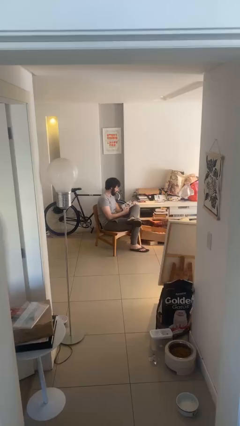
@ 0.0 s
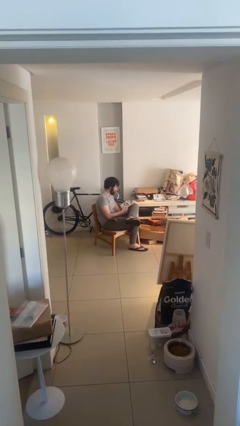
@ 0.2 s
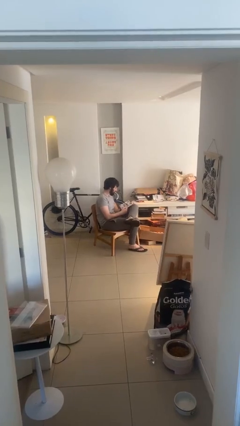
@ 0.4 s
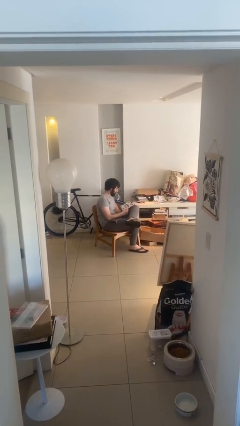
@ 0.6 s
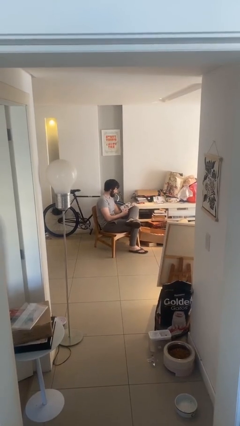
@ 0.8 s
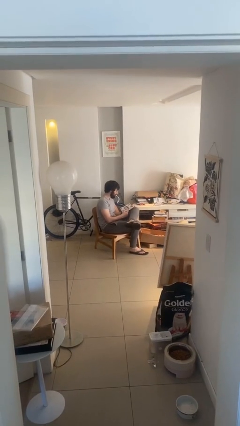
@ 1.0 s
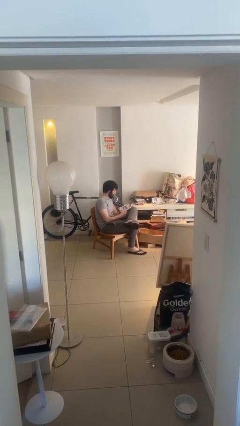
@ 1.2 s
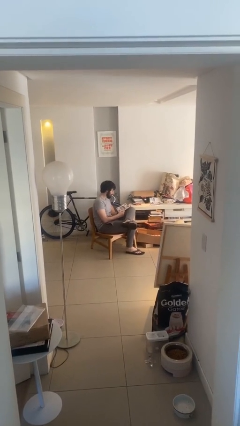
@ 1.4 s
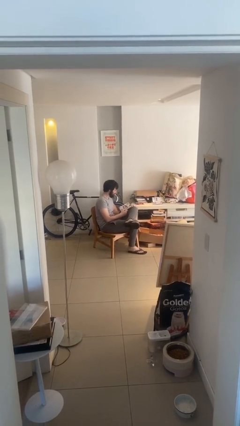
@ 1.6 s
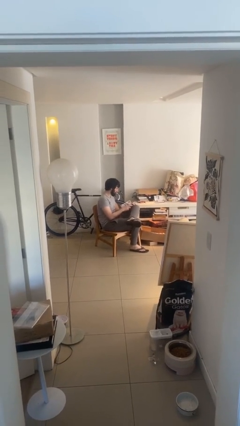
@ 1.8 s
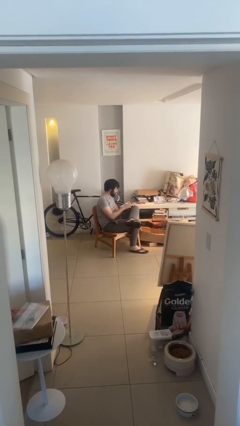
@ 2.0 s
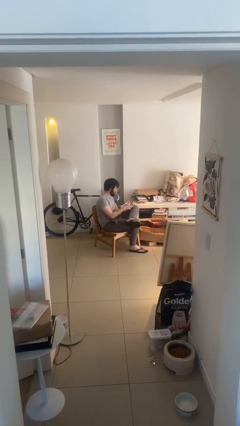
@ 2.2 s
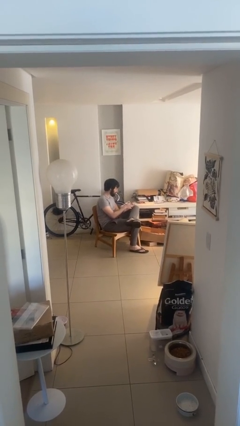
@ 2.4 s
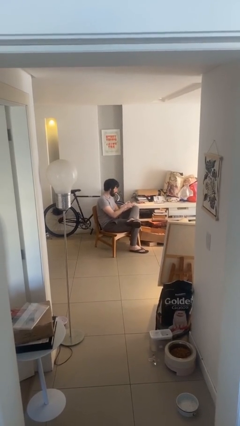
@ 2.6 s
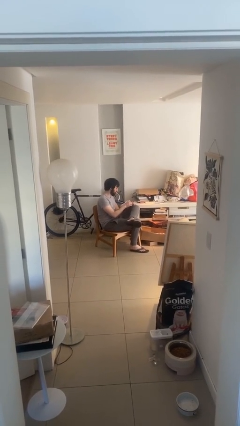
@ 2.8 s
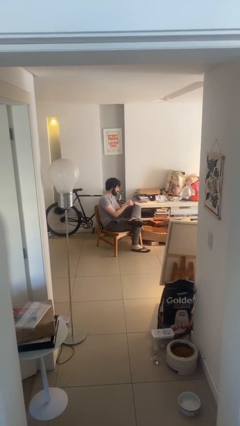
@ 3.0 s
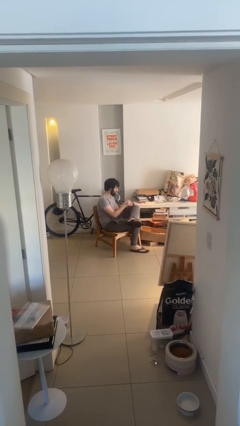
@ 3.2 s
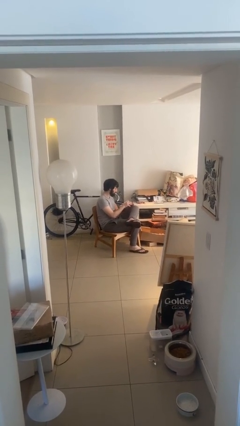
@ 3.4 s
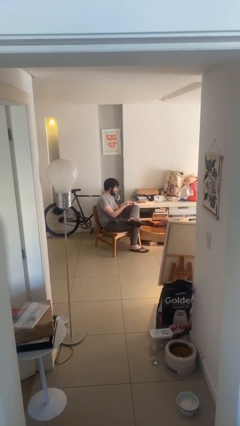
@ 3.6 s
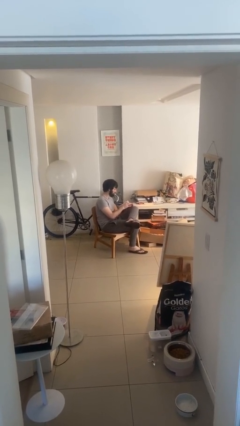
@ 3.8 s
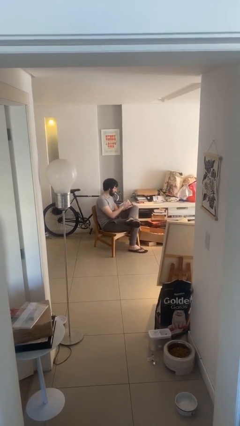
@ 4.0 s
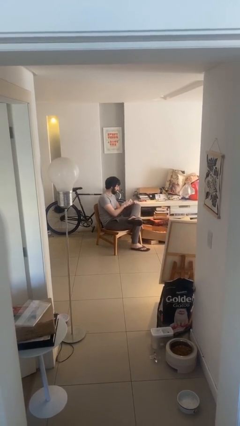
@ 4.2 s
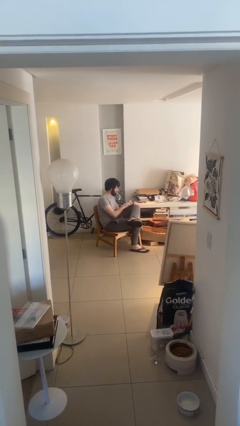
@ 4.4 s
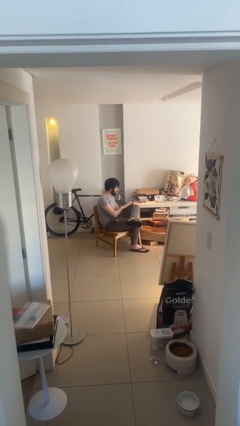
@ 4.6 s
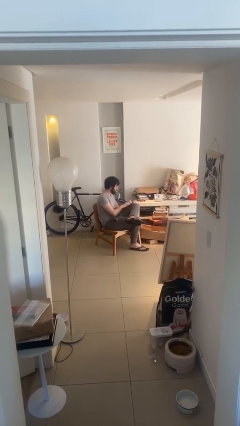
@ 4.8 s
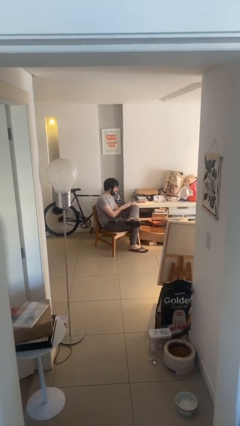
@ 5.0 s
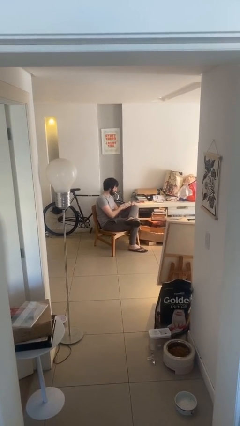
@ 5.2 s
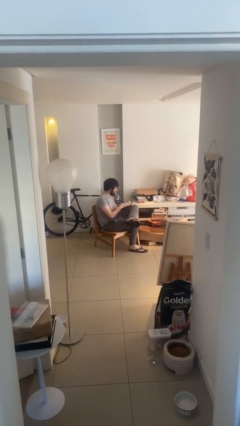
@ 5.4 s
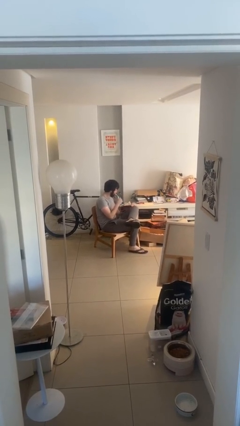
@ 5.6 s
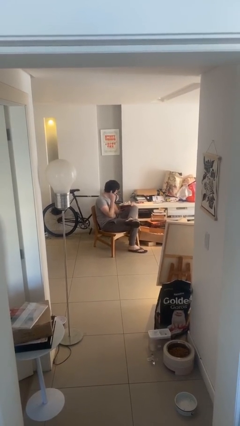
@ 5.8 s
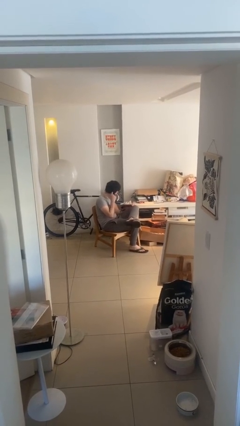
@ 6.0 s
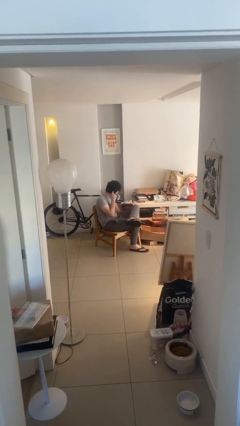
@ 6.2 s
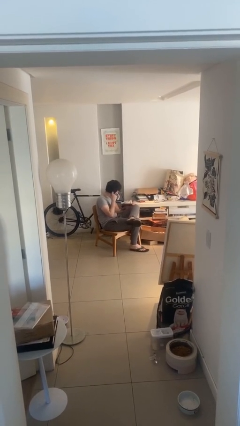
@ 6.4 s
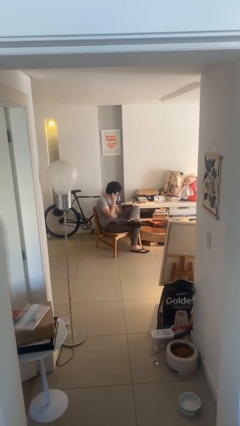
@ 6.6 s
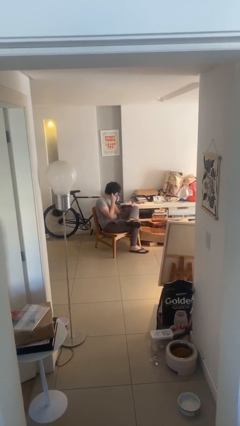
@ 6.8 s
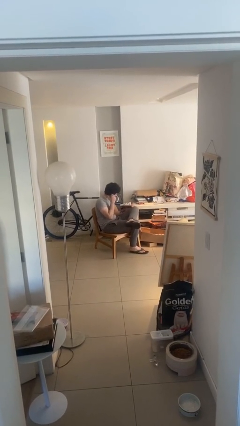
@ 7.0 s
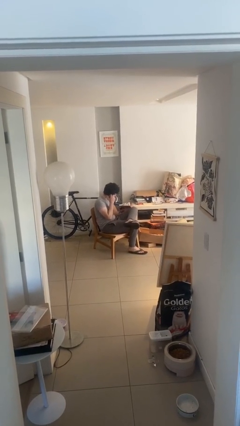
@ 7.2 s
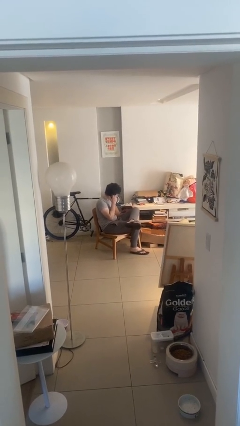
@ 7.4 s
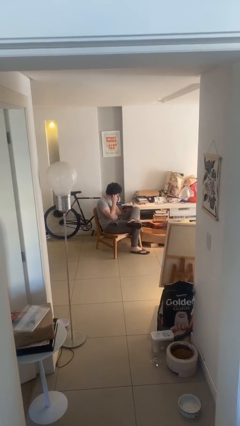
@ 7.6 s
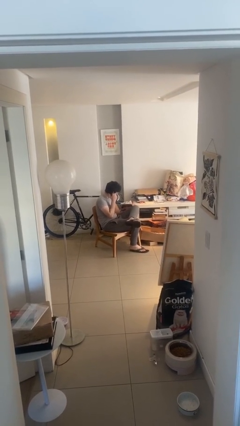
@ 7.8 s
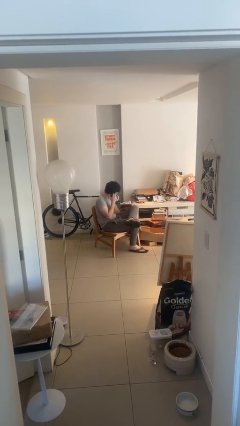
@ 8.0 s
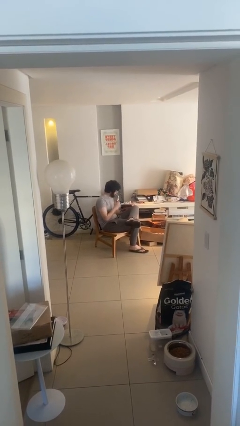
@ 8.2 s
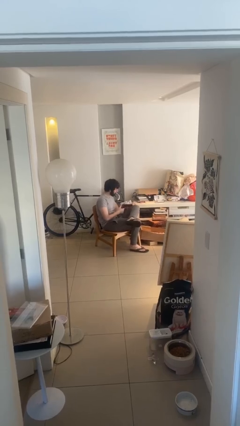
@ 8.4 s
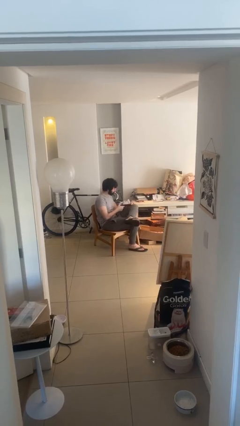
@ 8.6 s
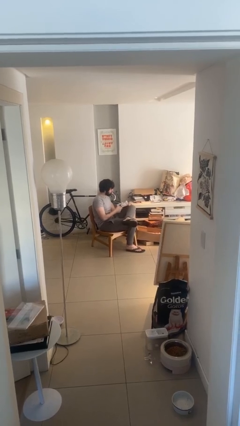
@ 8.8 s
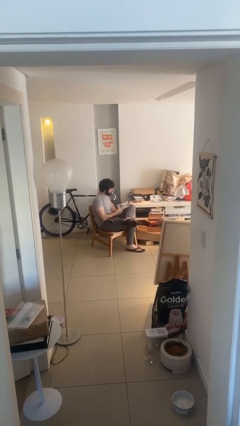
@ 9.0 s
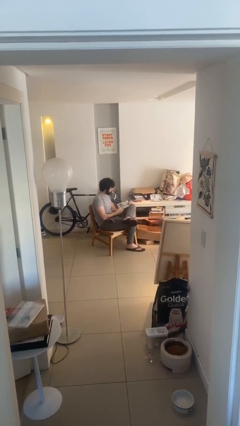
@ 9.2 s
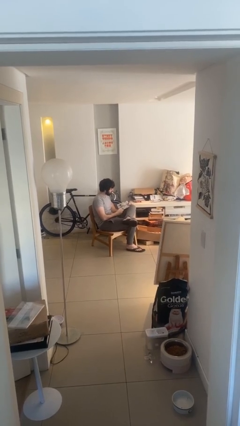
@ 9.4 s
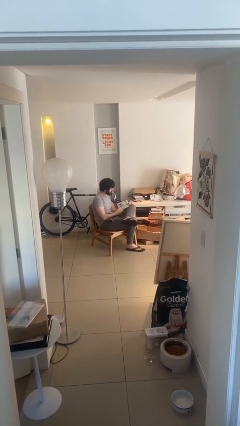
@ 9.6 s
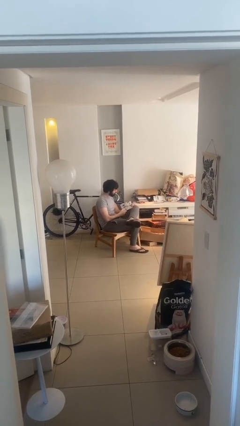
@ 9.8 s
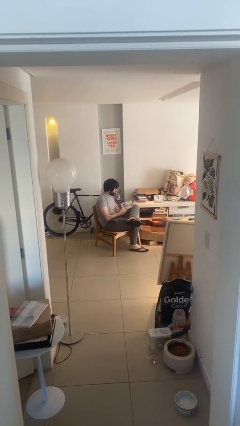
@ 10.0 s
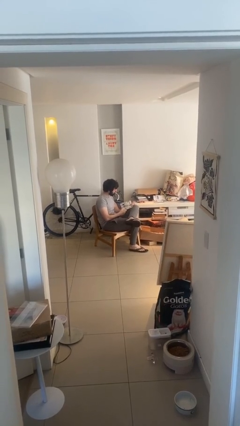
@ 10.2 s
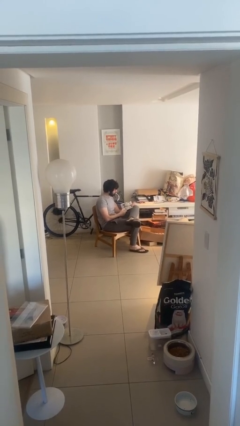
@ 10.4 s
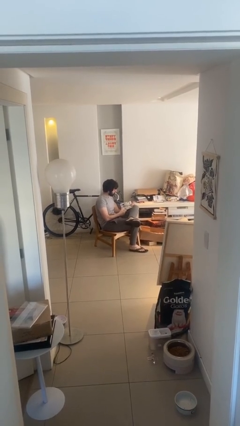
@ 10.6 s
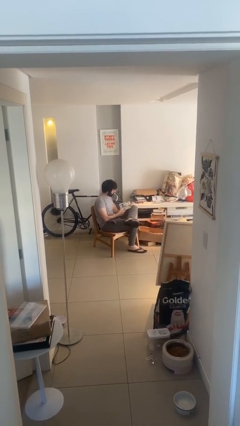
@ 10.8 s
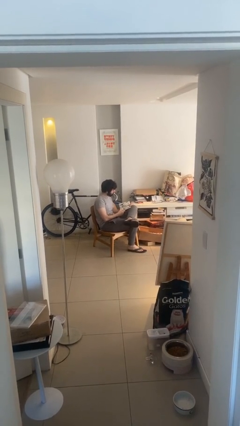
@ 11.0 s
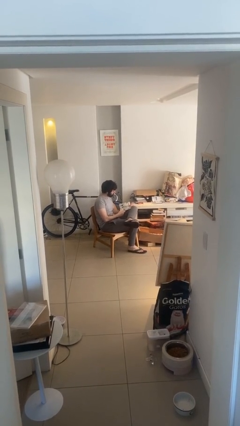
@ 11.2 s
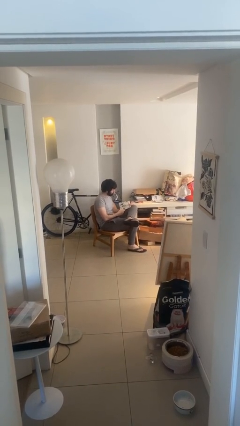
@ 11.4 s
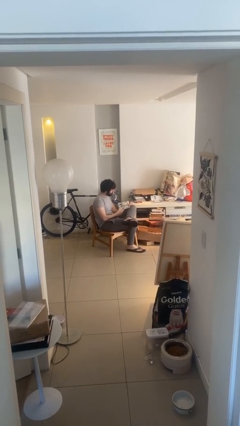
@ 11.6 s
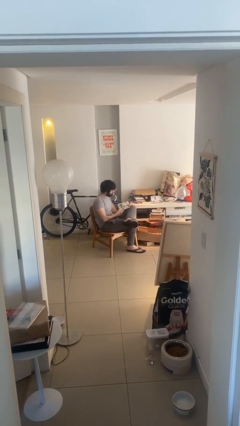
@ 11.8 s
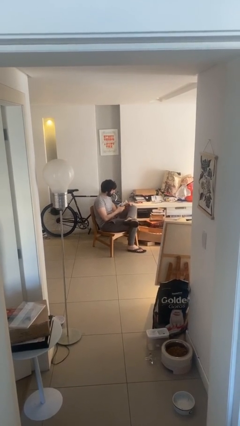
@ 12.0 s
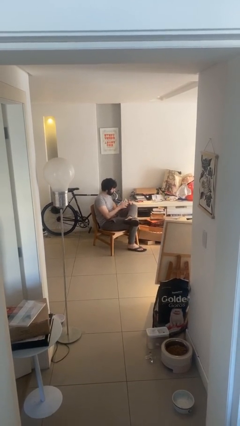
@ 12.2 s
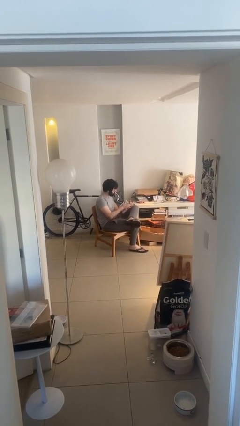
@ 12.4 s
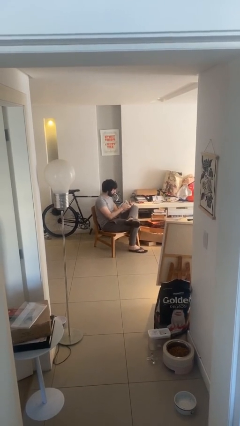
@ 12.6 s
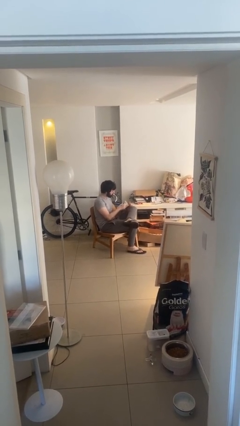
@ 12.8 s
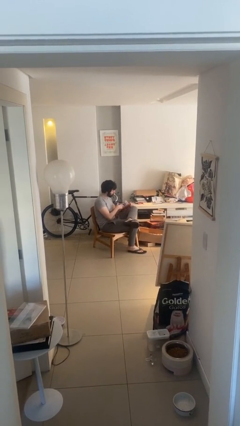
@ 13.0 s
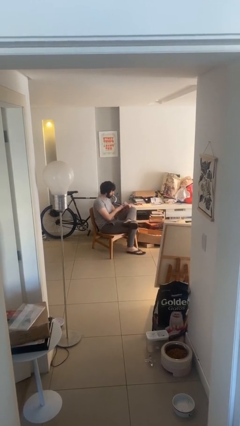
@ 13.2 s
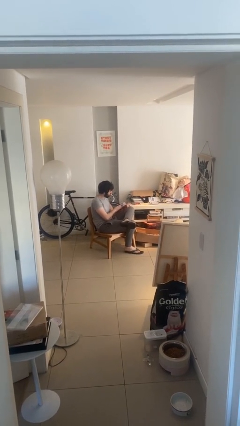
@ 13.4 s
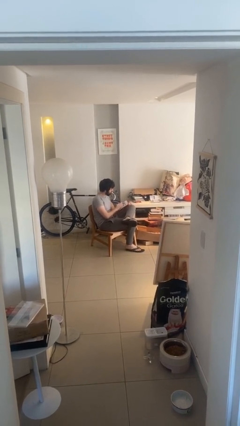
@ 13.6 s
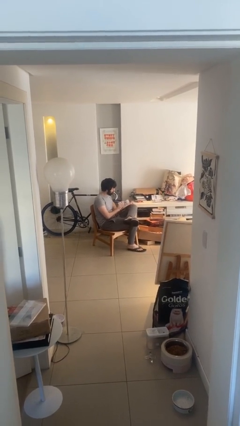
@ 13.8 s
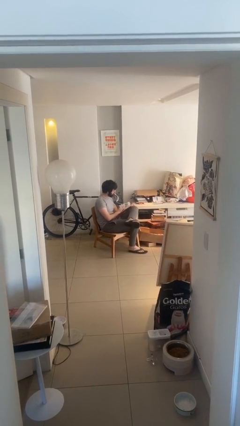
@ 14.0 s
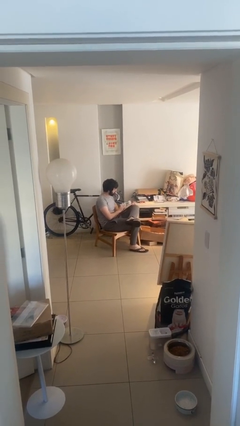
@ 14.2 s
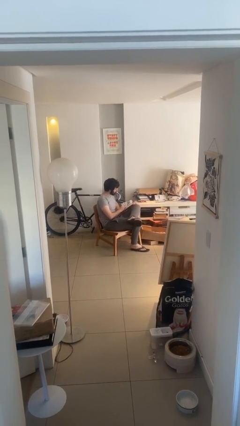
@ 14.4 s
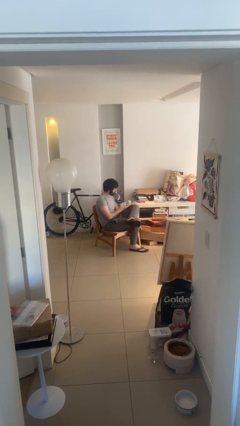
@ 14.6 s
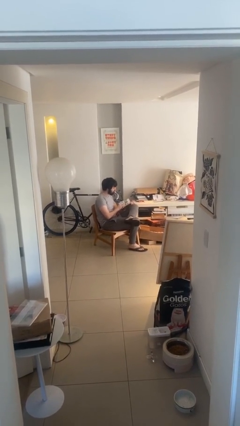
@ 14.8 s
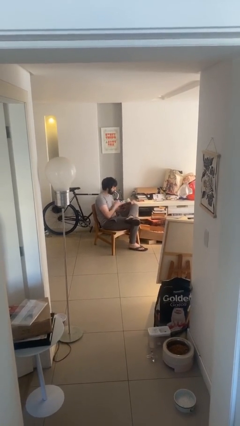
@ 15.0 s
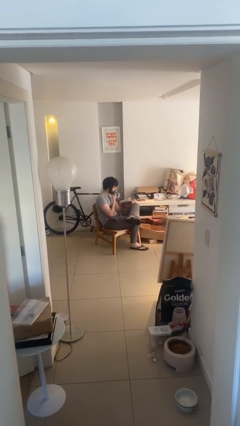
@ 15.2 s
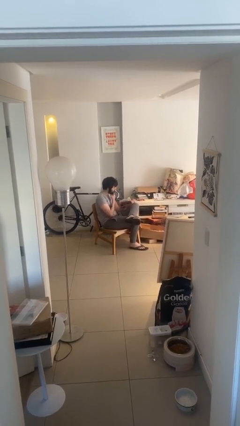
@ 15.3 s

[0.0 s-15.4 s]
person reads document

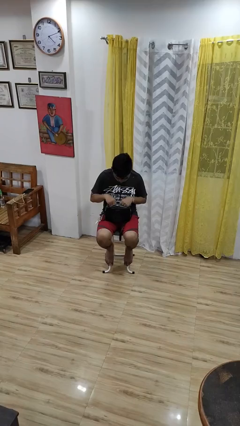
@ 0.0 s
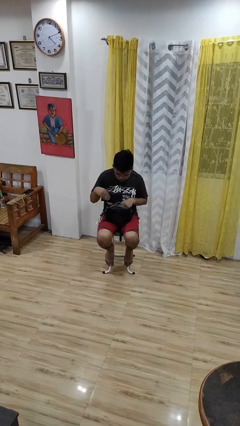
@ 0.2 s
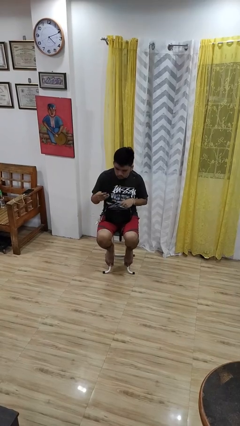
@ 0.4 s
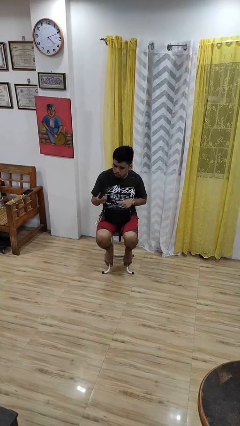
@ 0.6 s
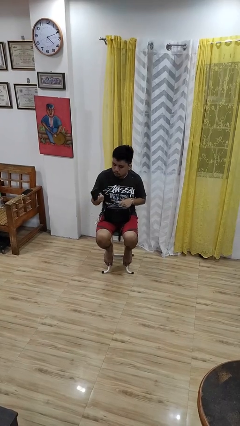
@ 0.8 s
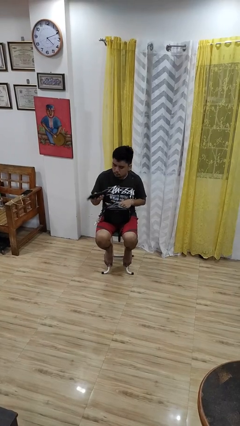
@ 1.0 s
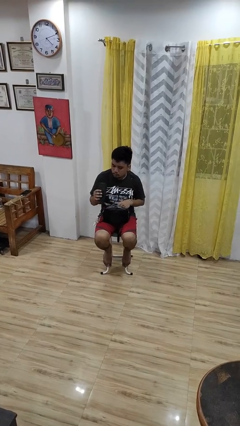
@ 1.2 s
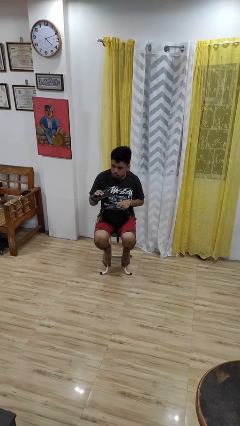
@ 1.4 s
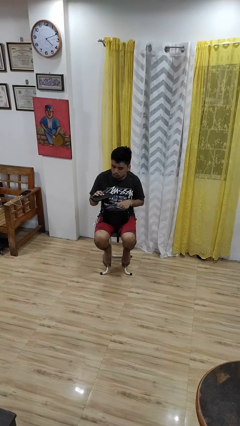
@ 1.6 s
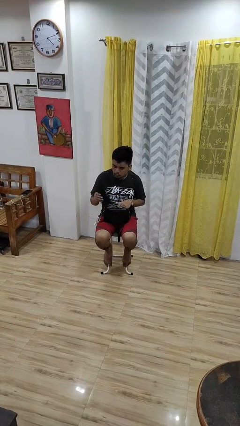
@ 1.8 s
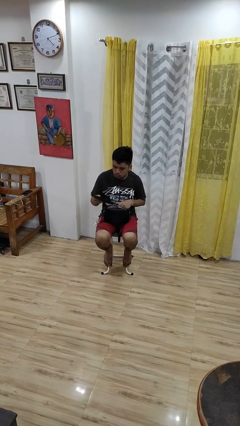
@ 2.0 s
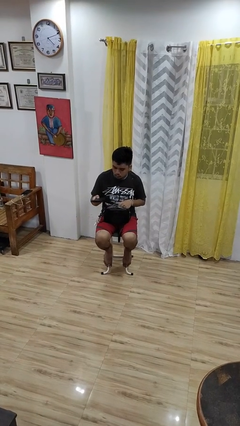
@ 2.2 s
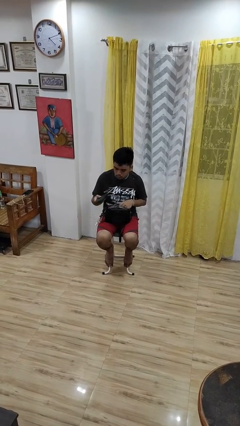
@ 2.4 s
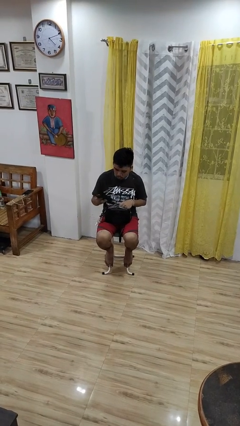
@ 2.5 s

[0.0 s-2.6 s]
person takes object from purse
